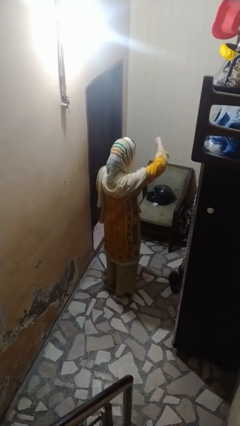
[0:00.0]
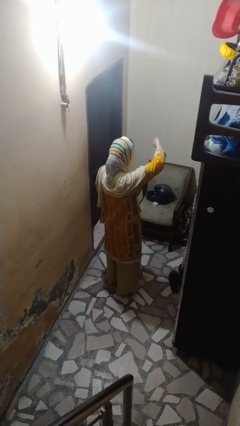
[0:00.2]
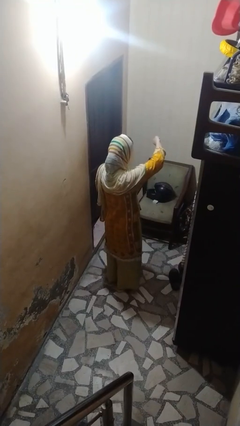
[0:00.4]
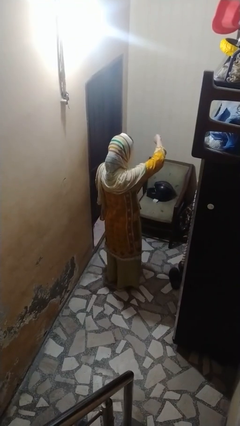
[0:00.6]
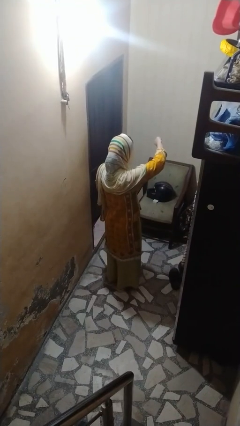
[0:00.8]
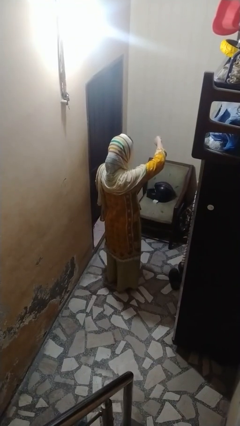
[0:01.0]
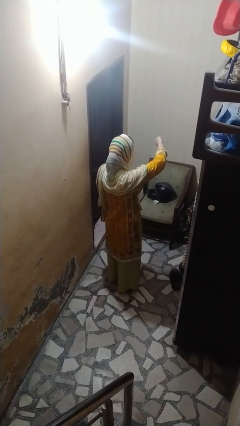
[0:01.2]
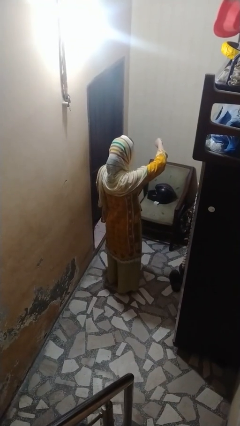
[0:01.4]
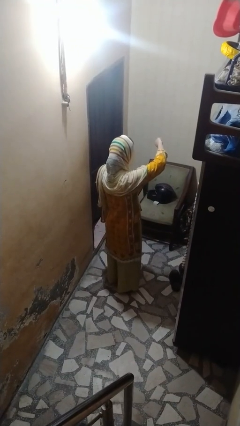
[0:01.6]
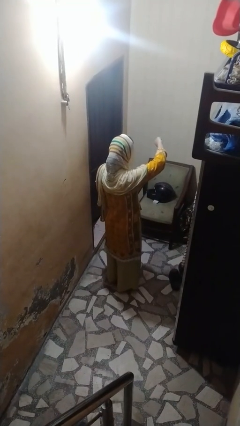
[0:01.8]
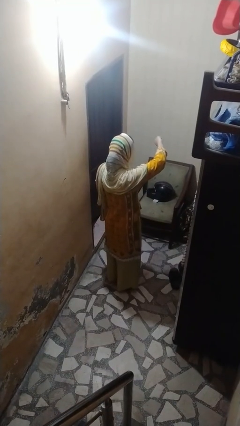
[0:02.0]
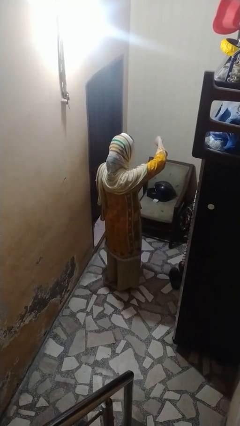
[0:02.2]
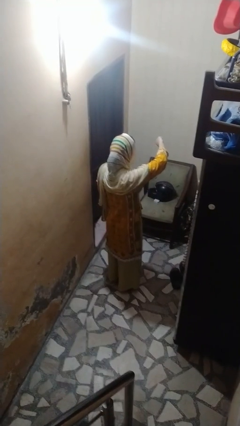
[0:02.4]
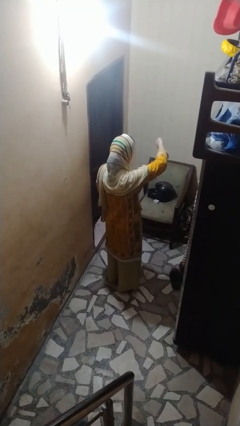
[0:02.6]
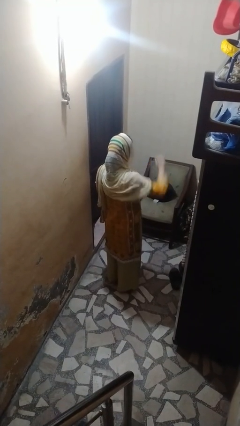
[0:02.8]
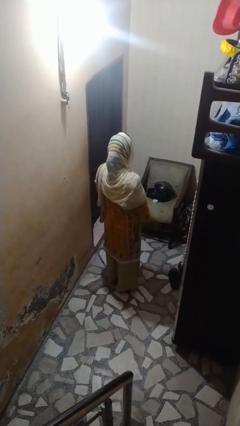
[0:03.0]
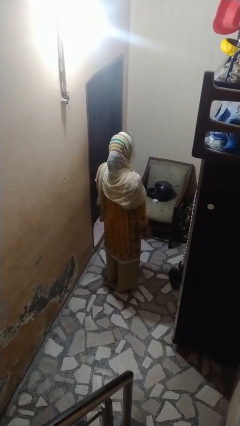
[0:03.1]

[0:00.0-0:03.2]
person gestures thumbs down

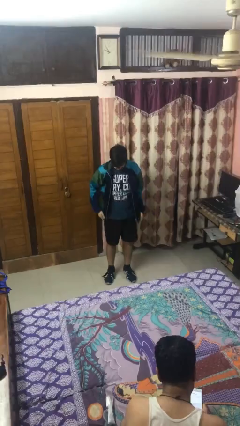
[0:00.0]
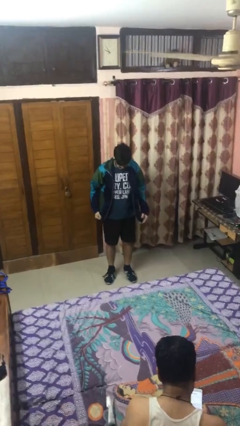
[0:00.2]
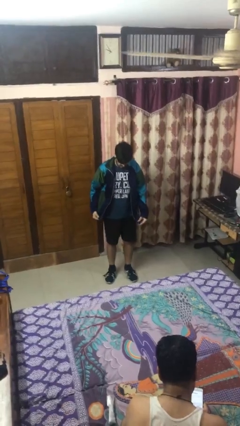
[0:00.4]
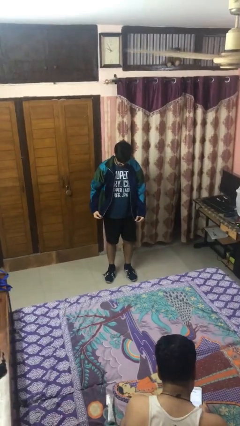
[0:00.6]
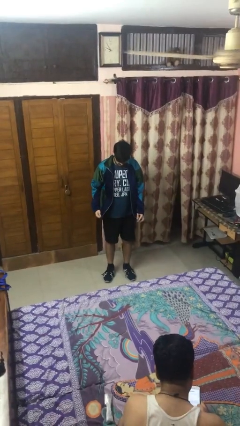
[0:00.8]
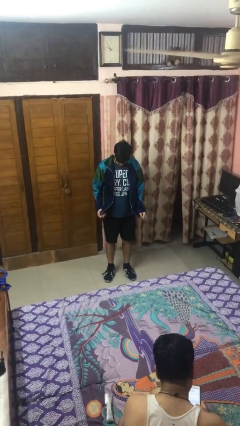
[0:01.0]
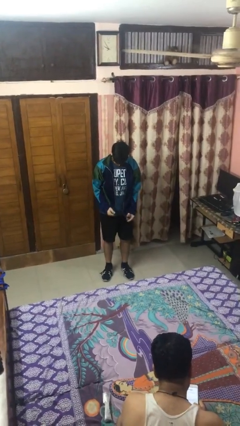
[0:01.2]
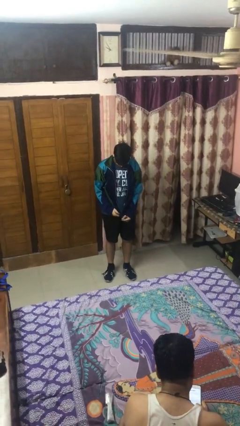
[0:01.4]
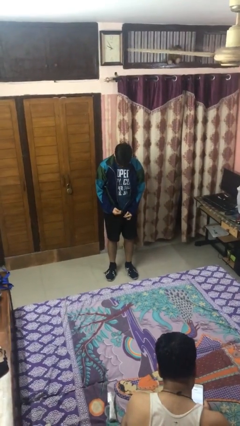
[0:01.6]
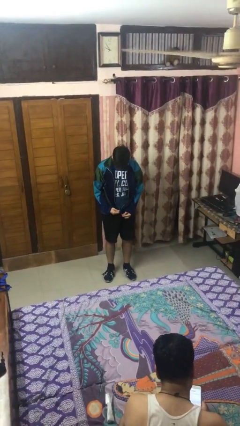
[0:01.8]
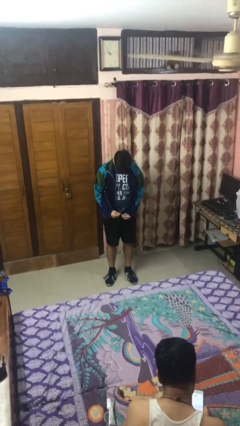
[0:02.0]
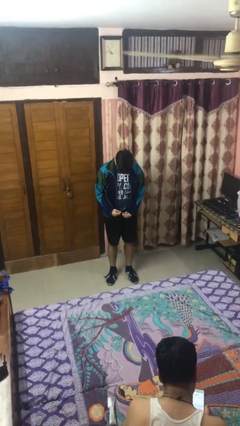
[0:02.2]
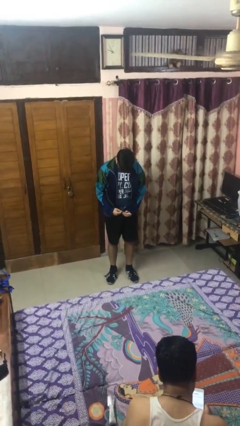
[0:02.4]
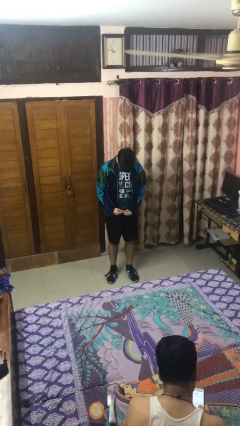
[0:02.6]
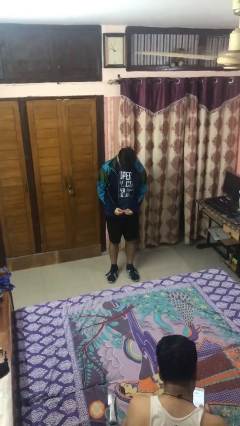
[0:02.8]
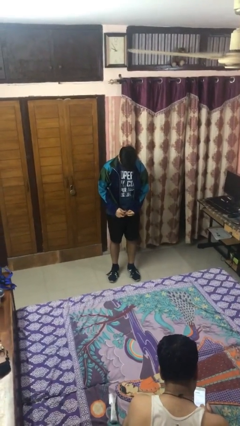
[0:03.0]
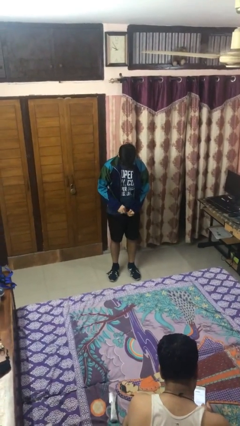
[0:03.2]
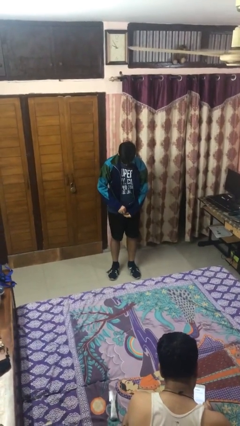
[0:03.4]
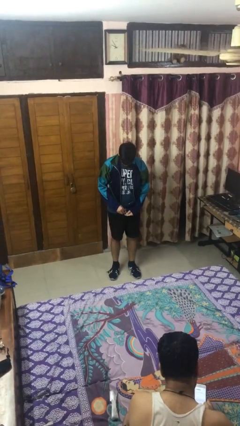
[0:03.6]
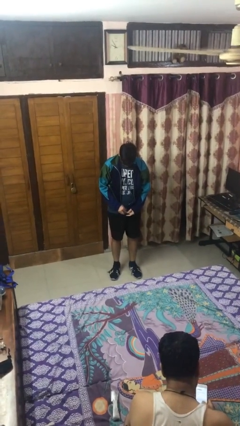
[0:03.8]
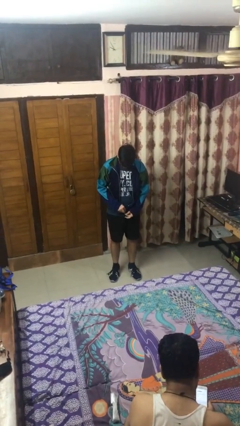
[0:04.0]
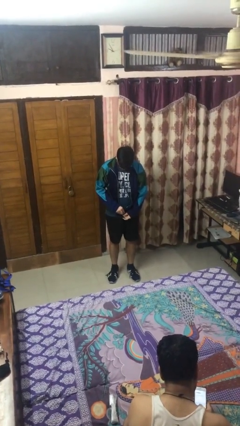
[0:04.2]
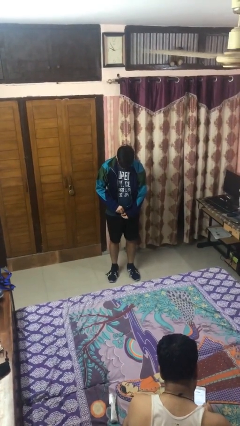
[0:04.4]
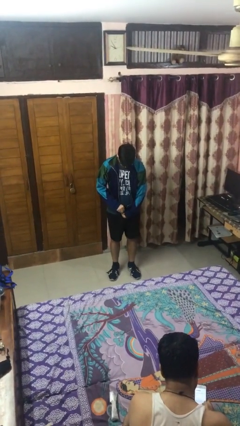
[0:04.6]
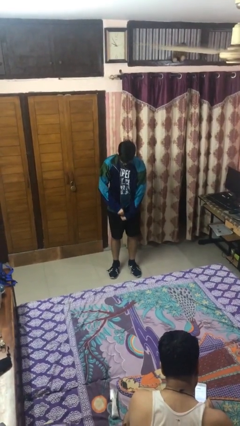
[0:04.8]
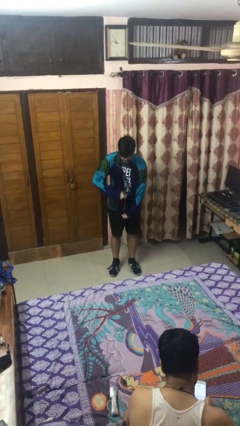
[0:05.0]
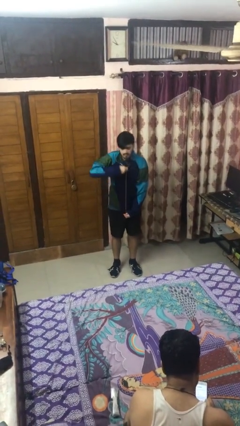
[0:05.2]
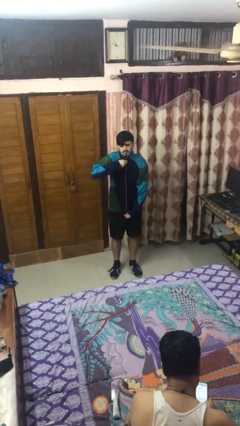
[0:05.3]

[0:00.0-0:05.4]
person zips up jacket

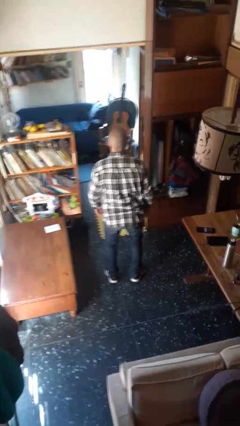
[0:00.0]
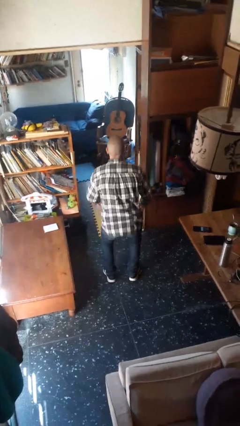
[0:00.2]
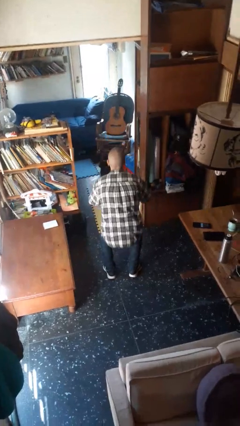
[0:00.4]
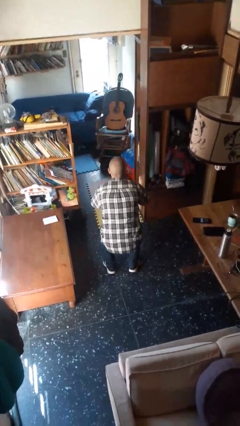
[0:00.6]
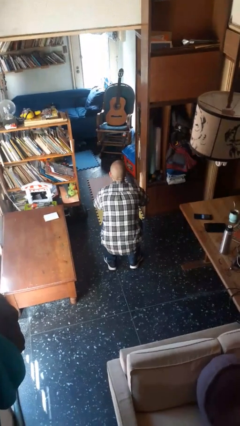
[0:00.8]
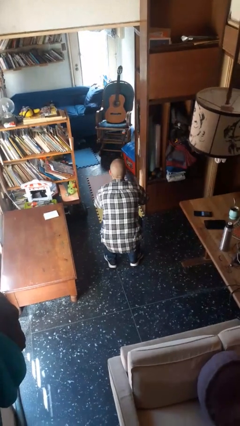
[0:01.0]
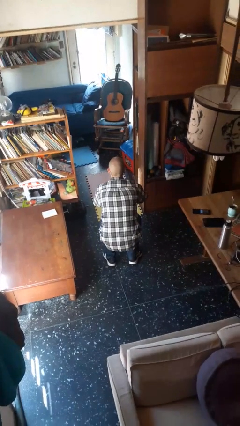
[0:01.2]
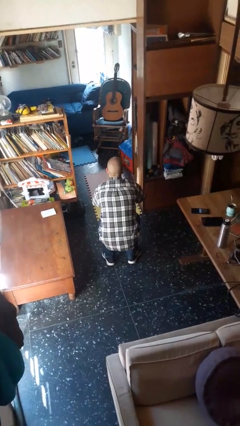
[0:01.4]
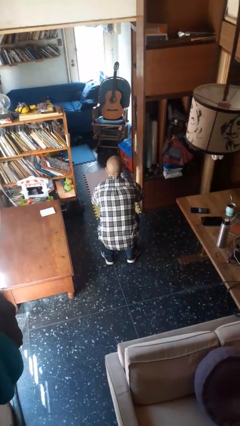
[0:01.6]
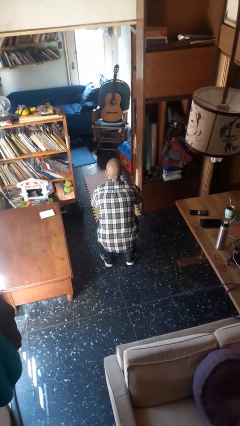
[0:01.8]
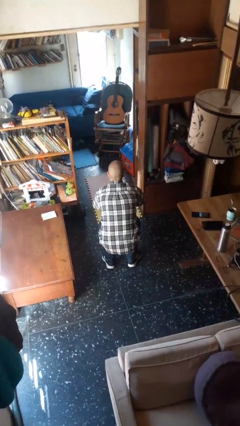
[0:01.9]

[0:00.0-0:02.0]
person squats

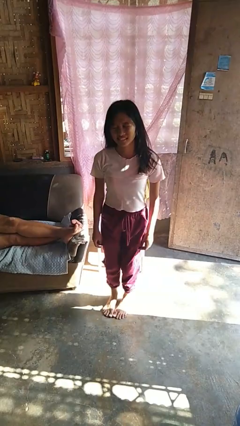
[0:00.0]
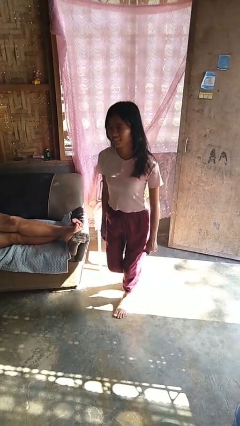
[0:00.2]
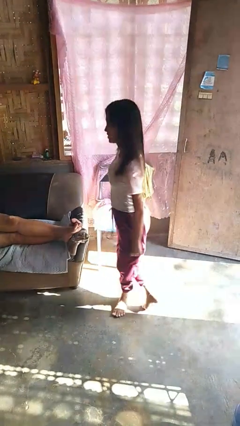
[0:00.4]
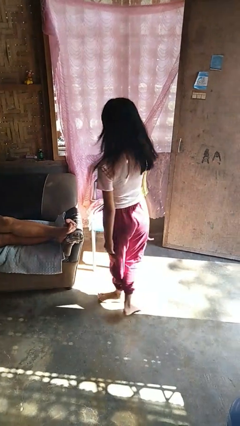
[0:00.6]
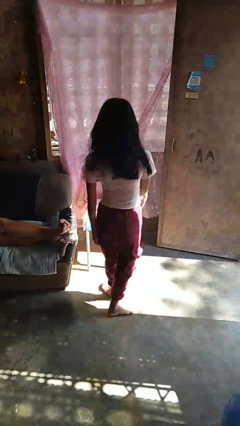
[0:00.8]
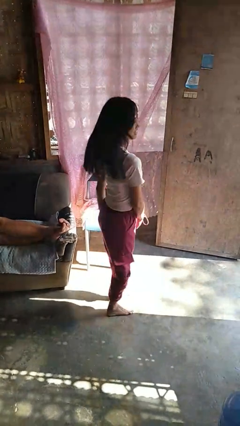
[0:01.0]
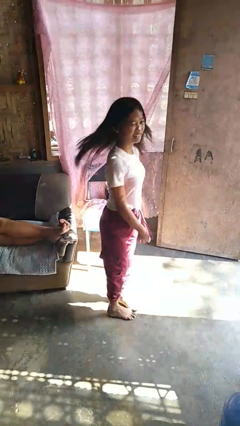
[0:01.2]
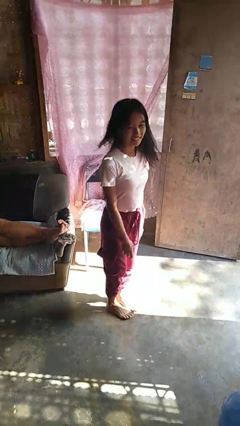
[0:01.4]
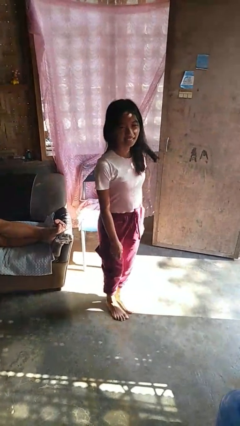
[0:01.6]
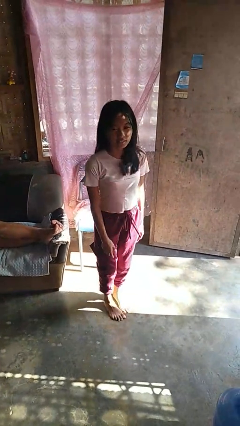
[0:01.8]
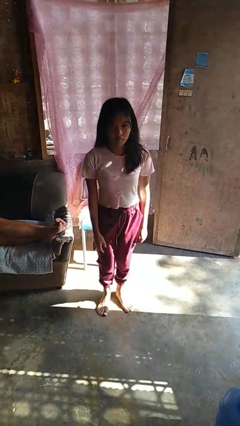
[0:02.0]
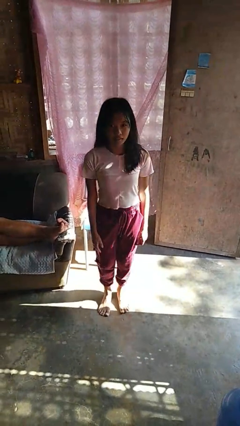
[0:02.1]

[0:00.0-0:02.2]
person twirls

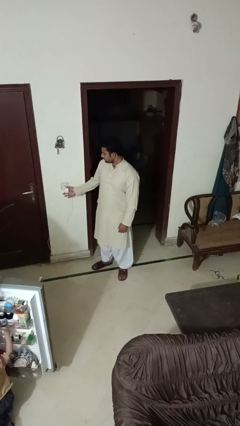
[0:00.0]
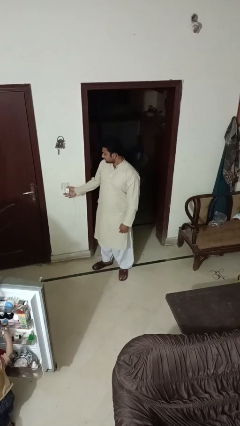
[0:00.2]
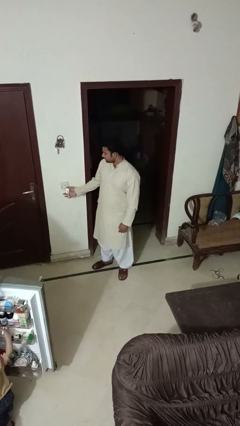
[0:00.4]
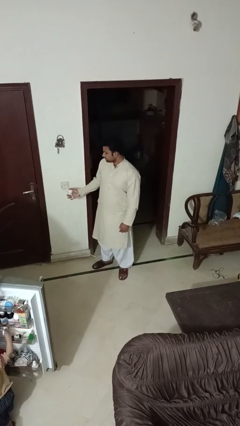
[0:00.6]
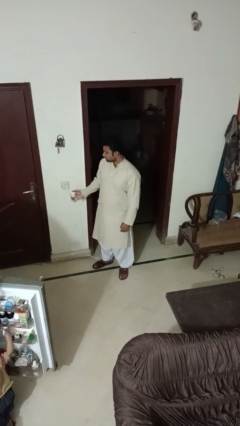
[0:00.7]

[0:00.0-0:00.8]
person unplugs from electrical socket

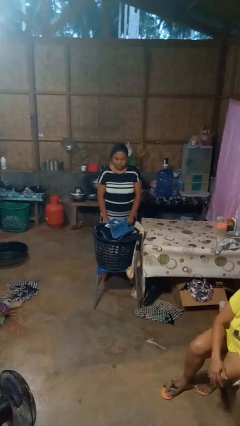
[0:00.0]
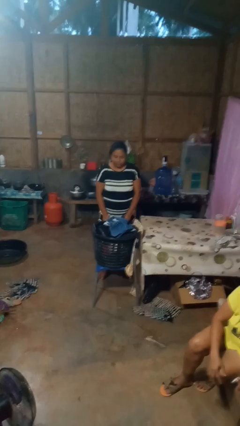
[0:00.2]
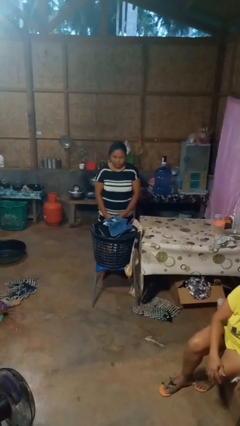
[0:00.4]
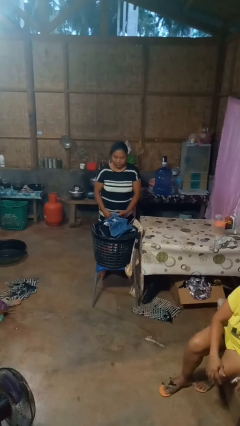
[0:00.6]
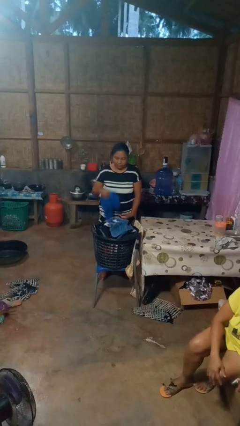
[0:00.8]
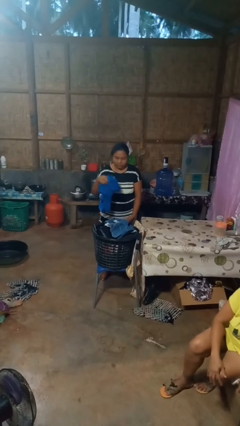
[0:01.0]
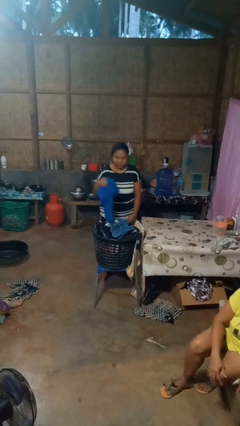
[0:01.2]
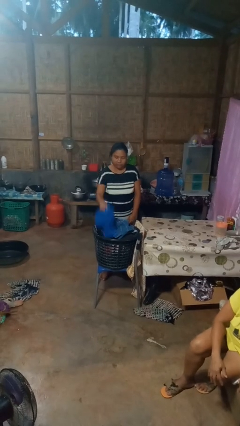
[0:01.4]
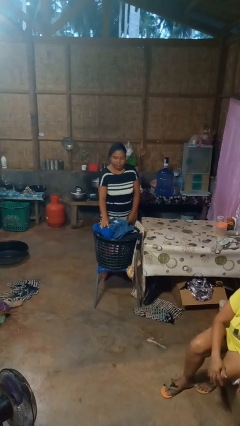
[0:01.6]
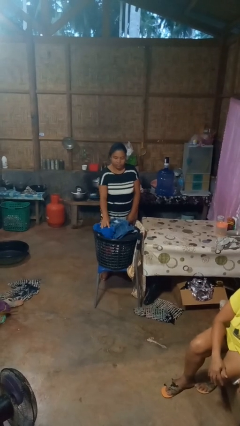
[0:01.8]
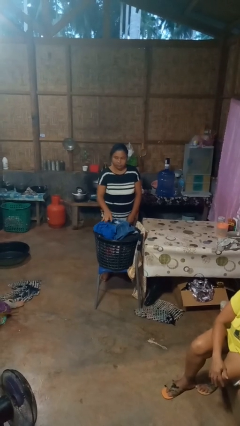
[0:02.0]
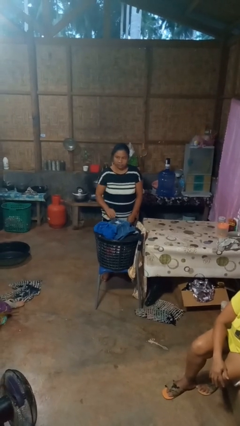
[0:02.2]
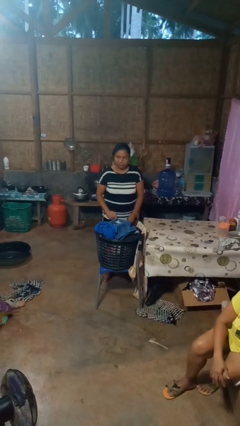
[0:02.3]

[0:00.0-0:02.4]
person puts object into basket

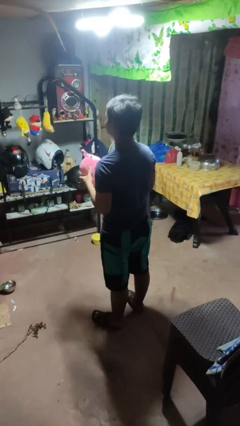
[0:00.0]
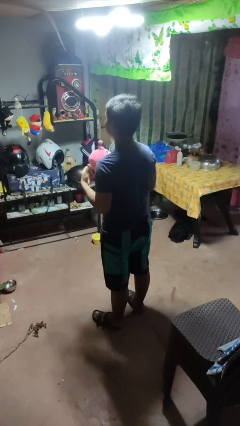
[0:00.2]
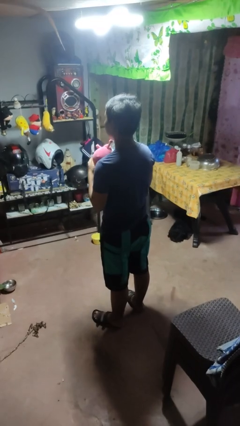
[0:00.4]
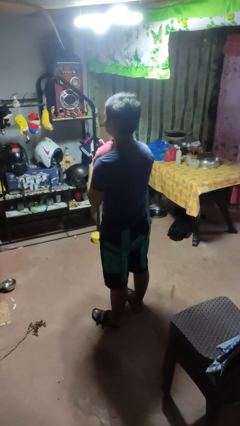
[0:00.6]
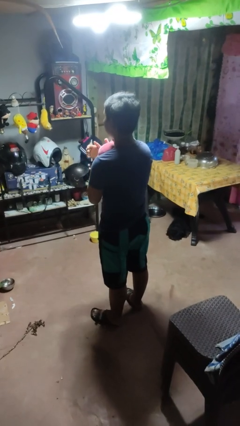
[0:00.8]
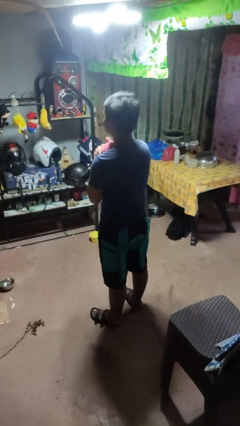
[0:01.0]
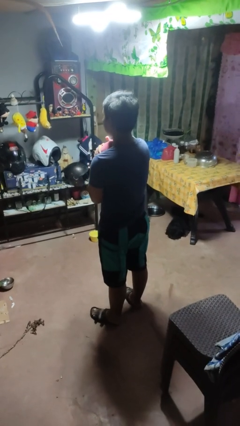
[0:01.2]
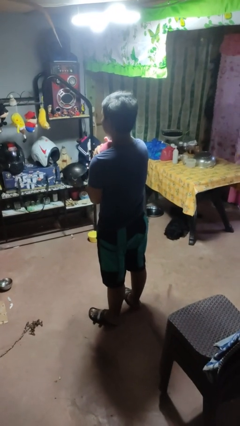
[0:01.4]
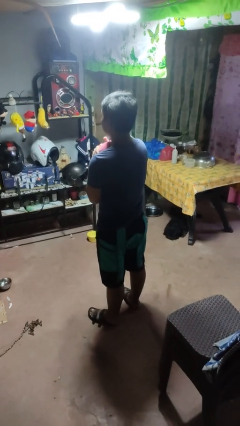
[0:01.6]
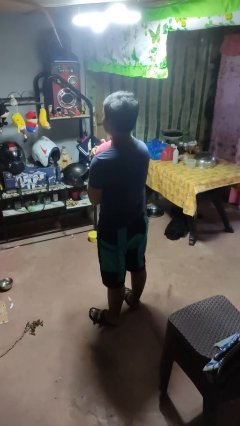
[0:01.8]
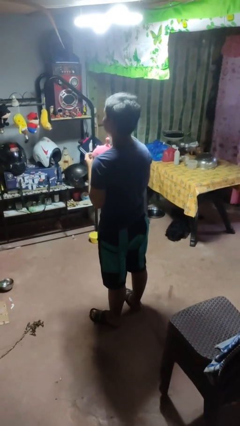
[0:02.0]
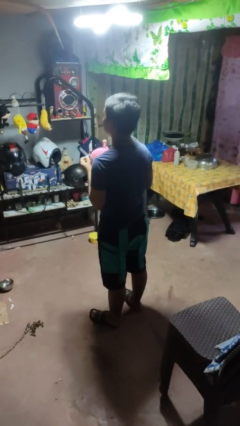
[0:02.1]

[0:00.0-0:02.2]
person hugs stuffed animal
